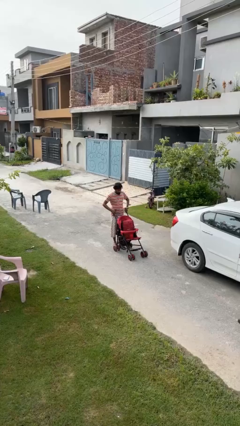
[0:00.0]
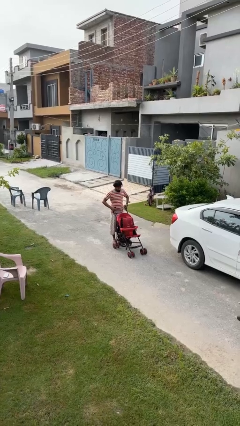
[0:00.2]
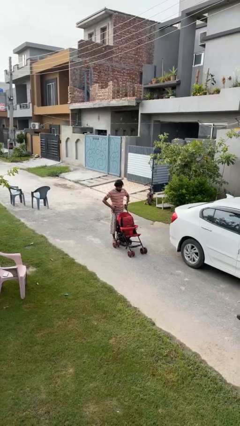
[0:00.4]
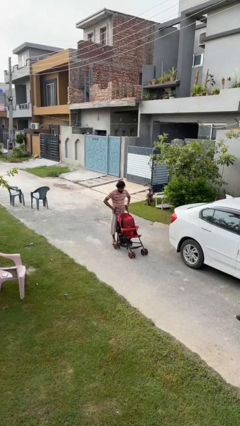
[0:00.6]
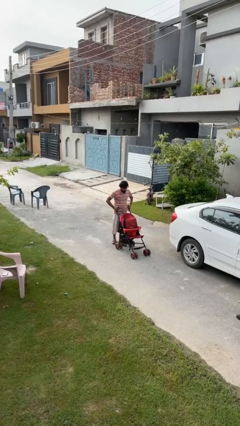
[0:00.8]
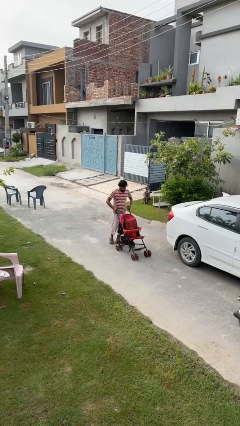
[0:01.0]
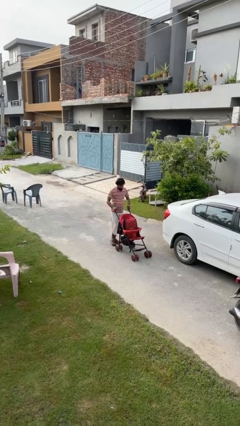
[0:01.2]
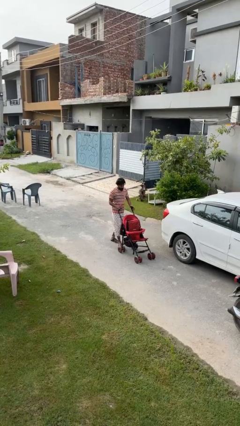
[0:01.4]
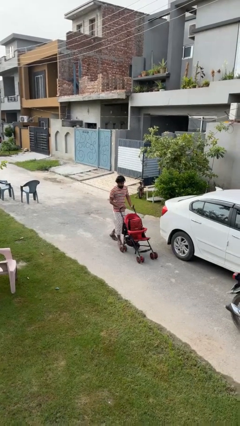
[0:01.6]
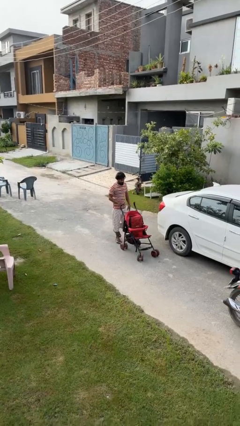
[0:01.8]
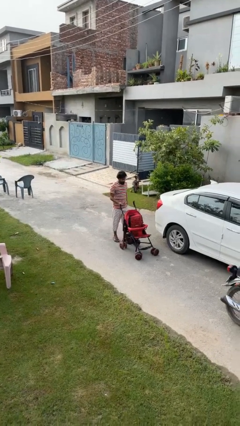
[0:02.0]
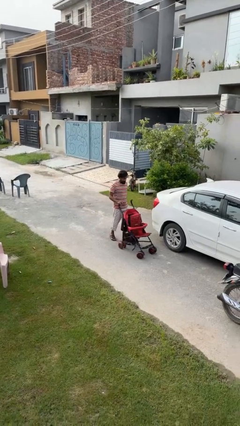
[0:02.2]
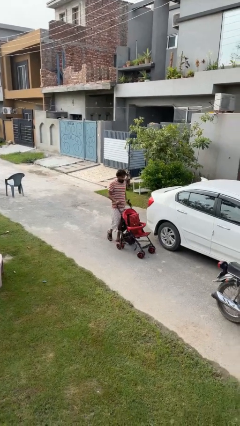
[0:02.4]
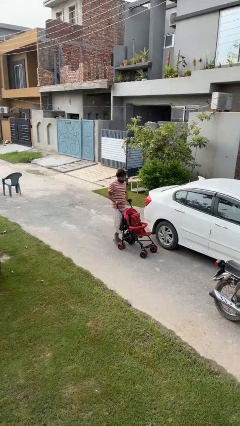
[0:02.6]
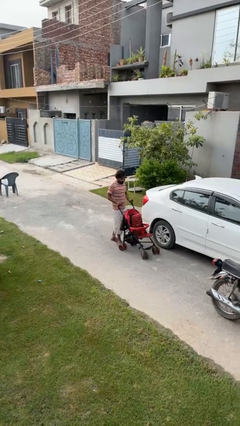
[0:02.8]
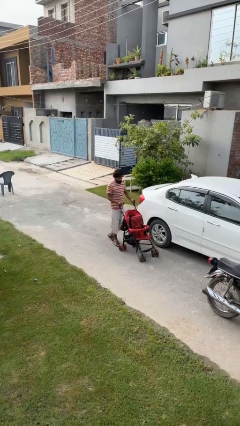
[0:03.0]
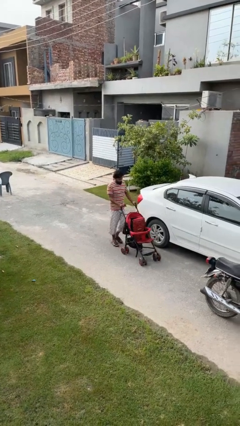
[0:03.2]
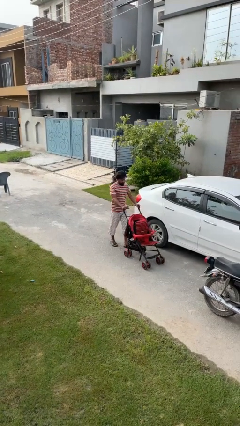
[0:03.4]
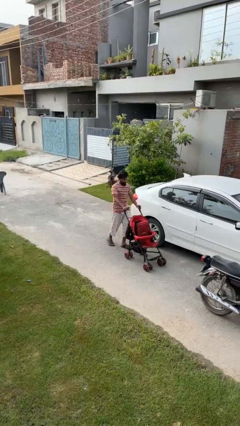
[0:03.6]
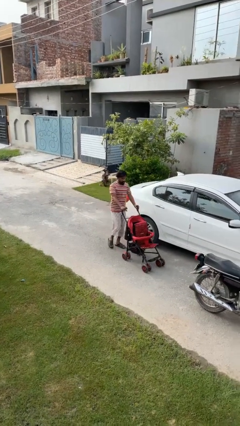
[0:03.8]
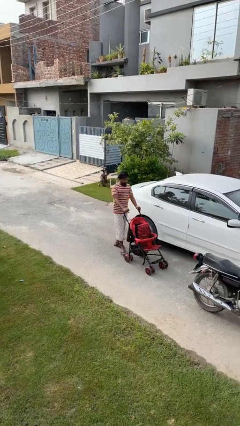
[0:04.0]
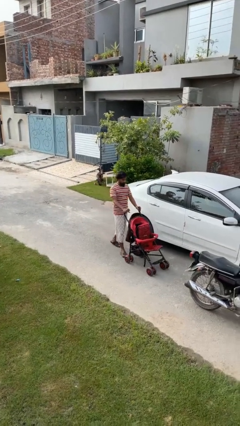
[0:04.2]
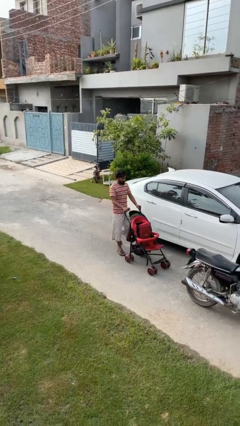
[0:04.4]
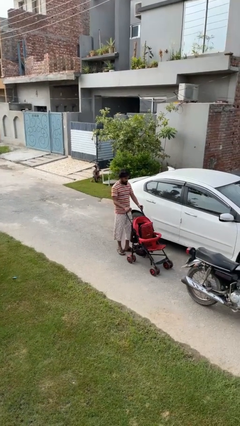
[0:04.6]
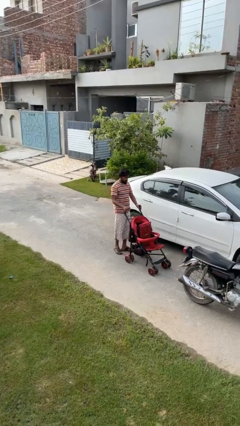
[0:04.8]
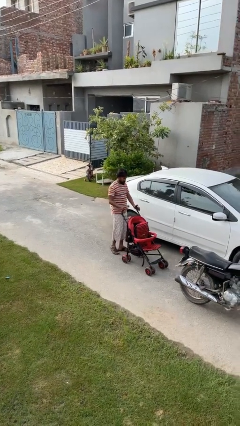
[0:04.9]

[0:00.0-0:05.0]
person pushes wheeled cart

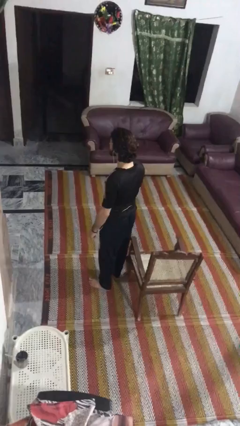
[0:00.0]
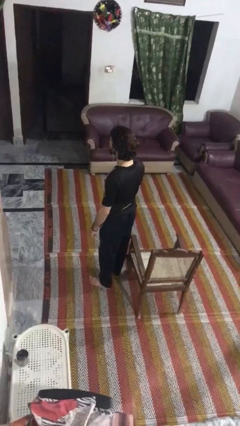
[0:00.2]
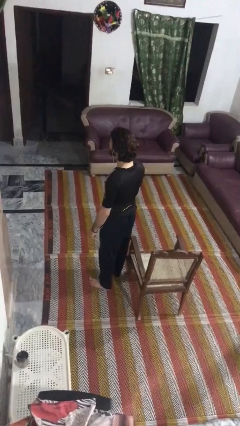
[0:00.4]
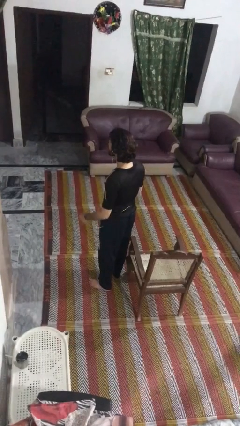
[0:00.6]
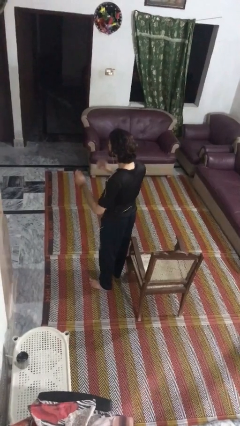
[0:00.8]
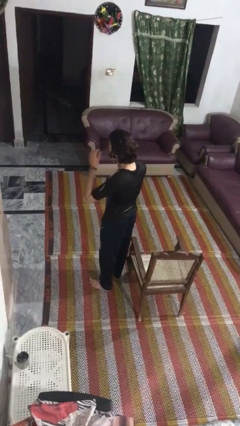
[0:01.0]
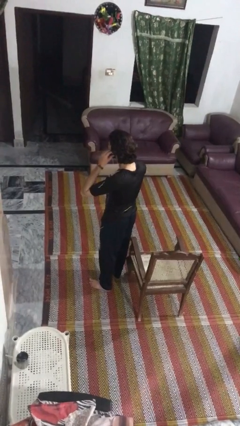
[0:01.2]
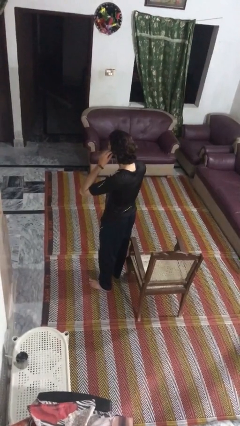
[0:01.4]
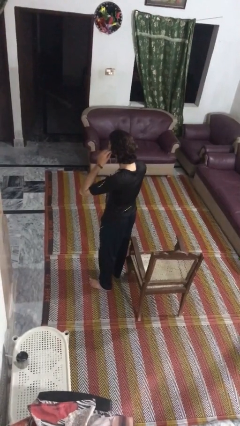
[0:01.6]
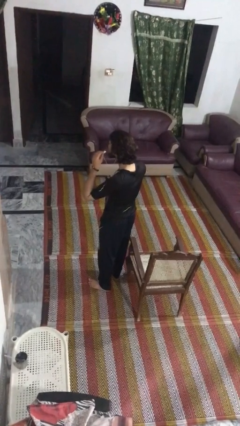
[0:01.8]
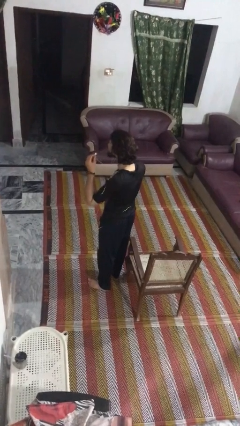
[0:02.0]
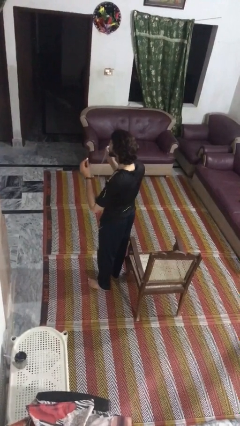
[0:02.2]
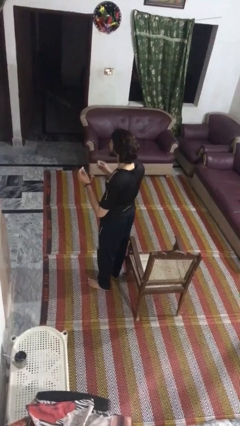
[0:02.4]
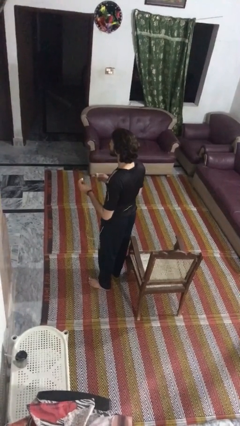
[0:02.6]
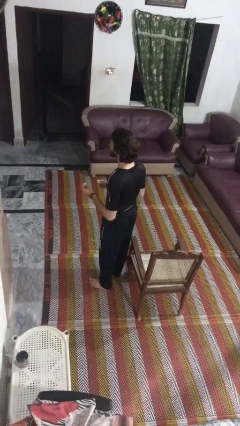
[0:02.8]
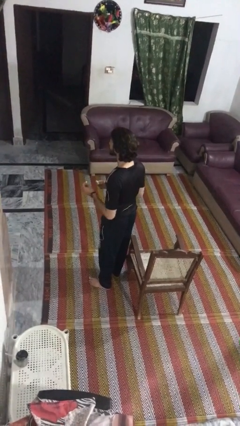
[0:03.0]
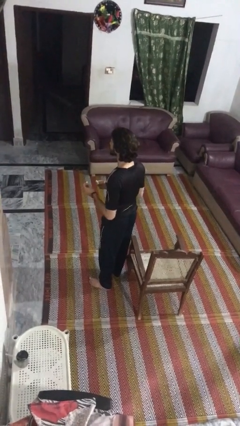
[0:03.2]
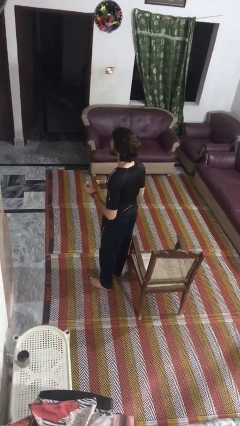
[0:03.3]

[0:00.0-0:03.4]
person takes off headphones

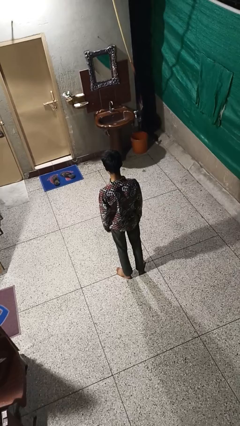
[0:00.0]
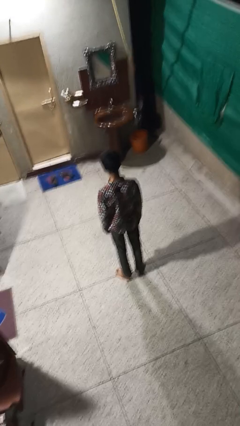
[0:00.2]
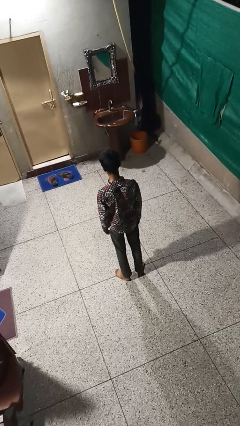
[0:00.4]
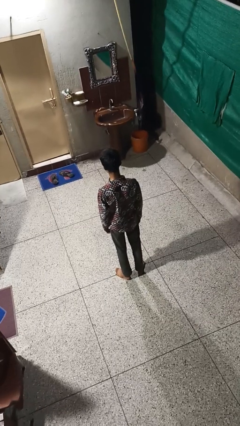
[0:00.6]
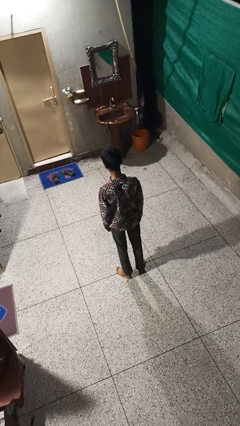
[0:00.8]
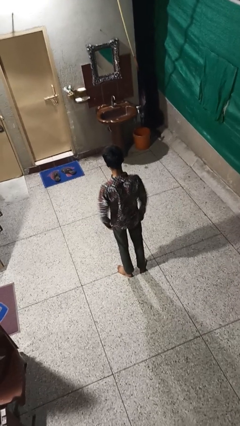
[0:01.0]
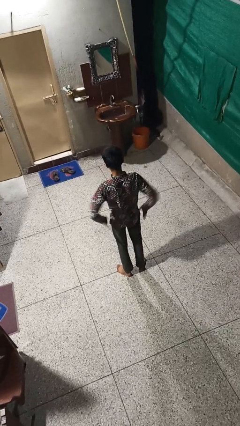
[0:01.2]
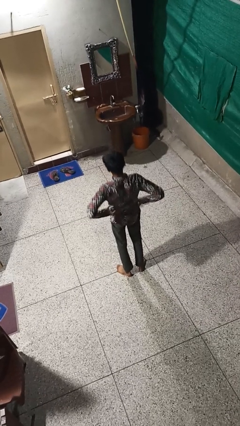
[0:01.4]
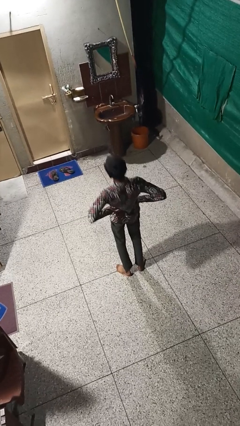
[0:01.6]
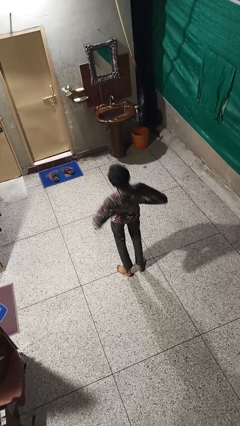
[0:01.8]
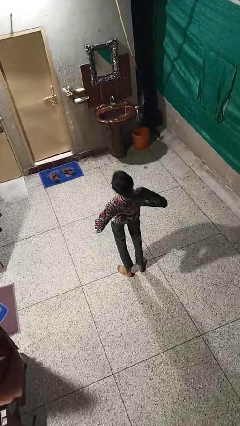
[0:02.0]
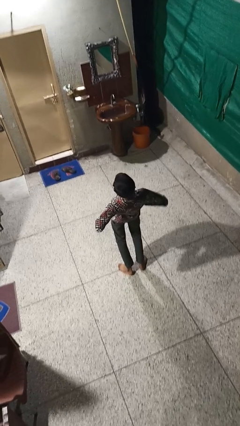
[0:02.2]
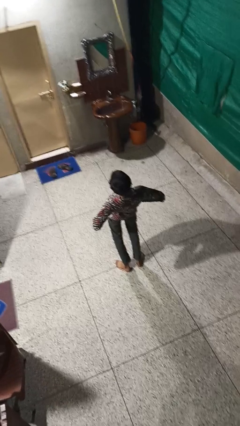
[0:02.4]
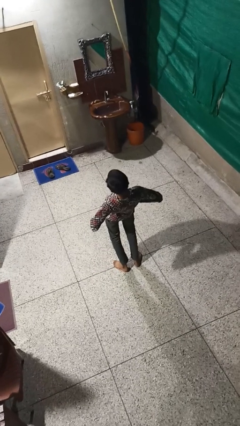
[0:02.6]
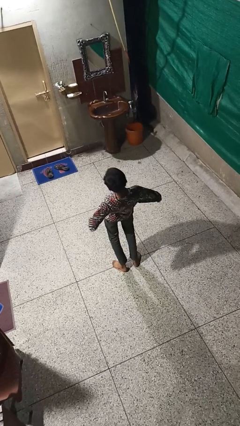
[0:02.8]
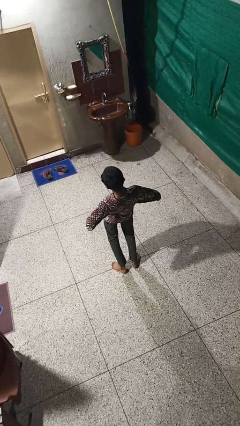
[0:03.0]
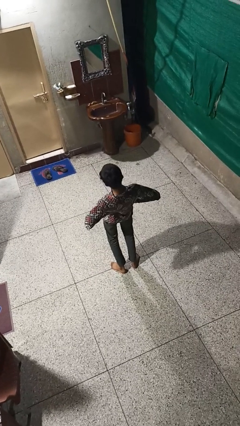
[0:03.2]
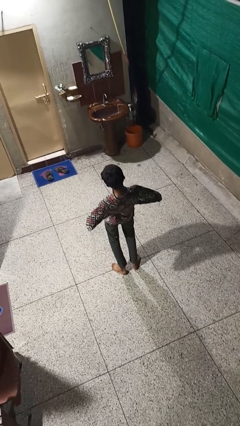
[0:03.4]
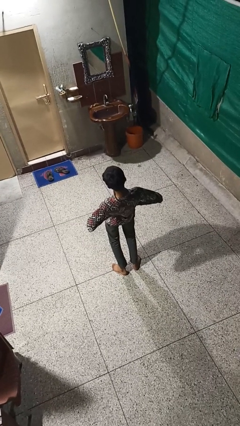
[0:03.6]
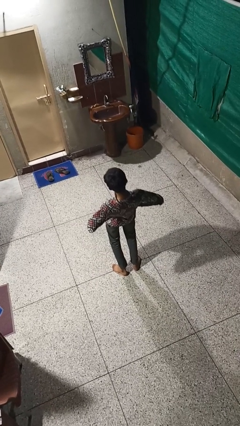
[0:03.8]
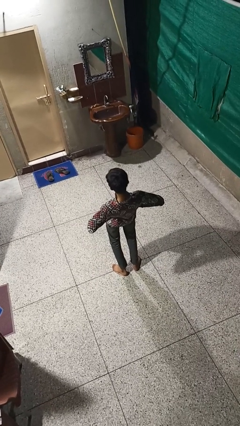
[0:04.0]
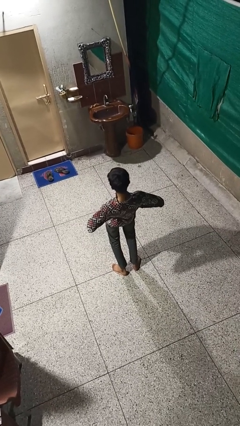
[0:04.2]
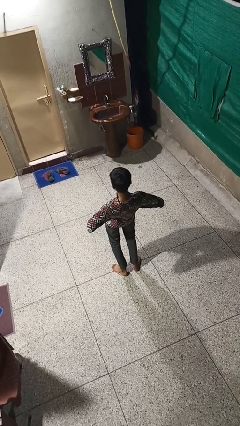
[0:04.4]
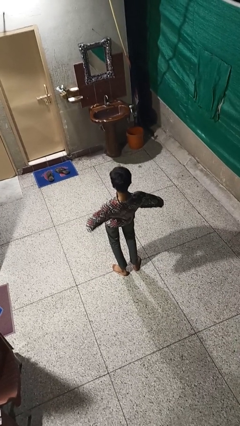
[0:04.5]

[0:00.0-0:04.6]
person stretches back

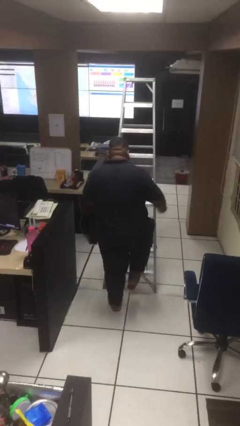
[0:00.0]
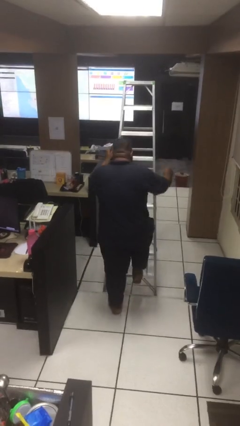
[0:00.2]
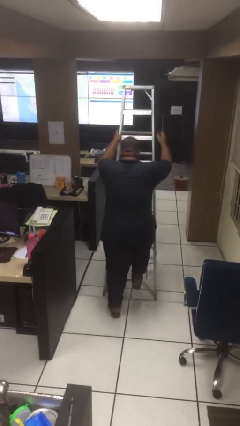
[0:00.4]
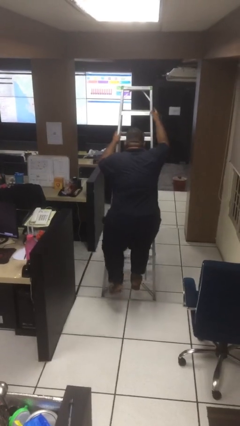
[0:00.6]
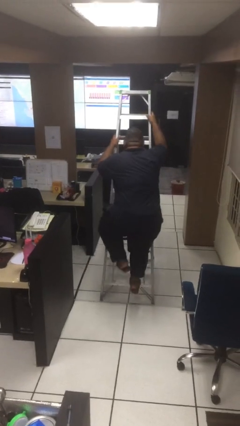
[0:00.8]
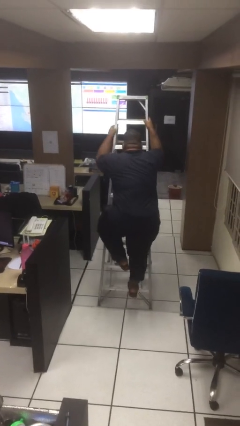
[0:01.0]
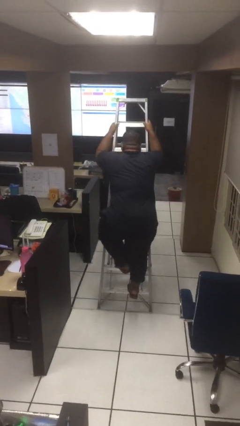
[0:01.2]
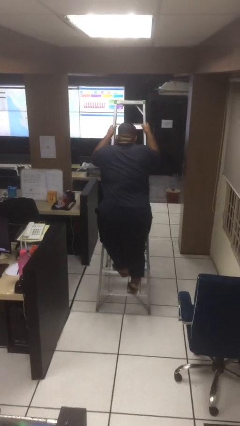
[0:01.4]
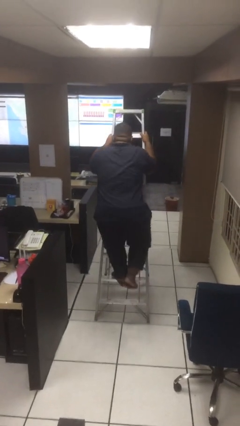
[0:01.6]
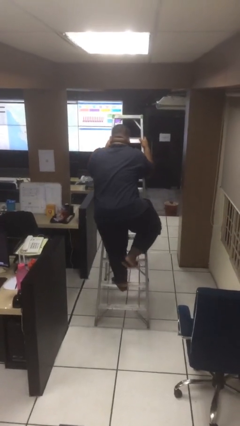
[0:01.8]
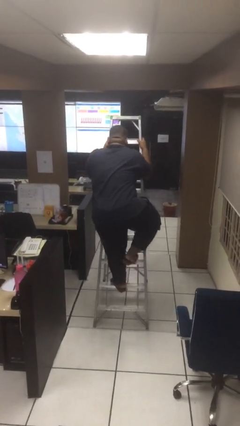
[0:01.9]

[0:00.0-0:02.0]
person climbs up ladder

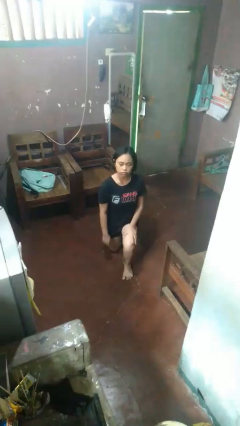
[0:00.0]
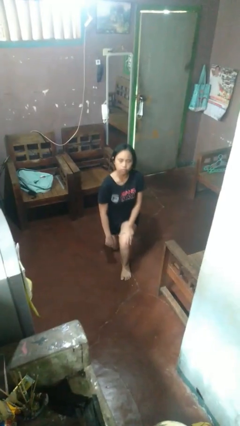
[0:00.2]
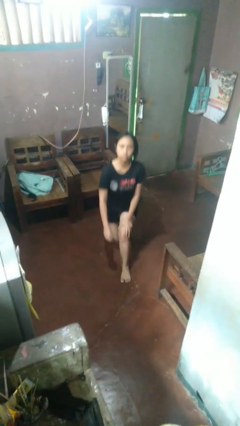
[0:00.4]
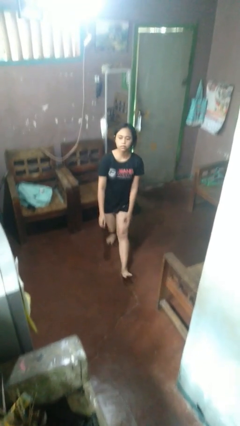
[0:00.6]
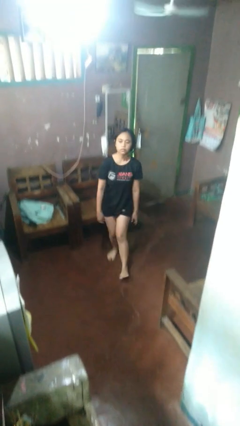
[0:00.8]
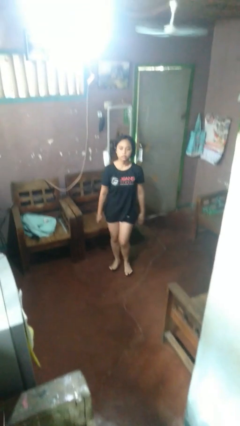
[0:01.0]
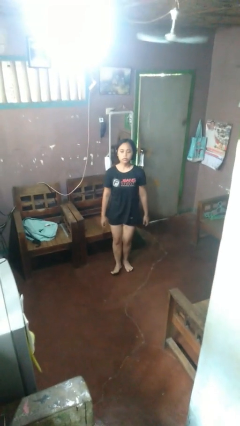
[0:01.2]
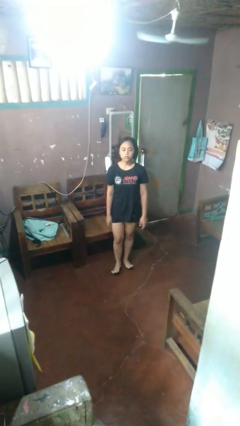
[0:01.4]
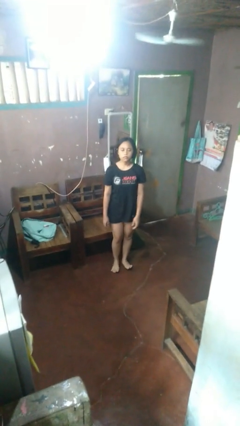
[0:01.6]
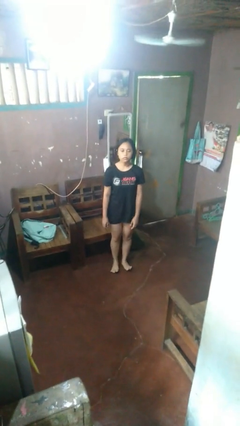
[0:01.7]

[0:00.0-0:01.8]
person stands up from floor

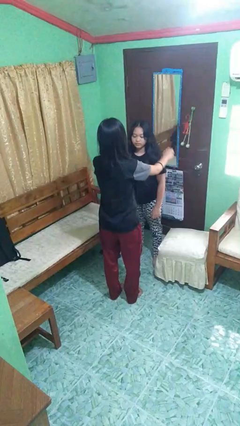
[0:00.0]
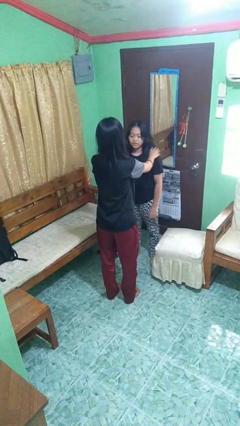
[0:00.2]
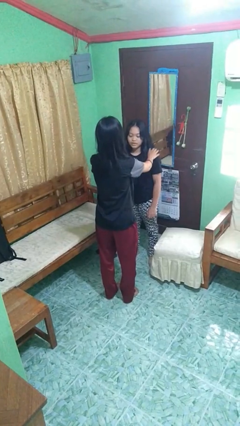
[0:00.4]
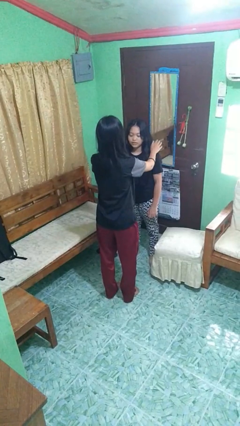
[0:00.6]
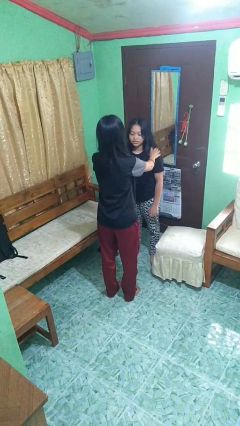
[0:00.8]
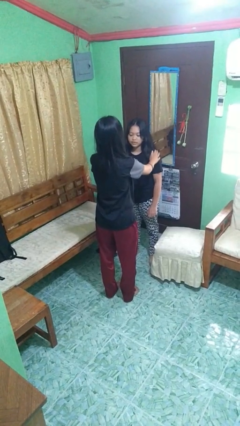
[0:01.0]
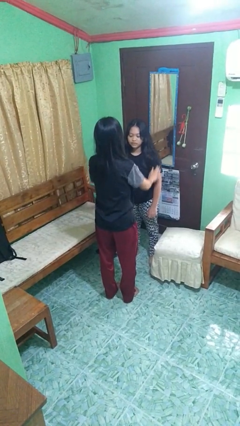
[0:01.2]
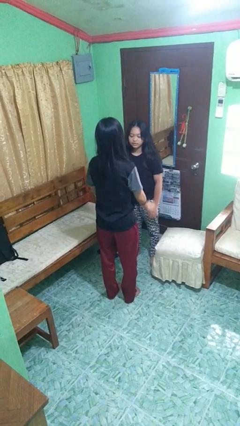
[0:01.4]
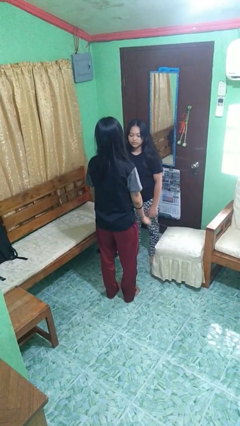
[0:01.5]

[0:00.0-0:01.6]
person pounds shoulders of person
